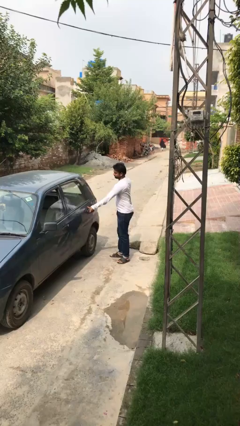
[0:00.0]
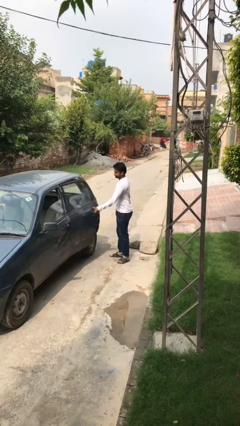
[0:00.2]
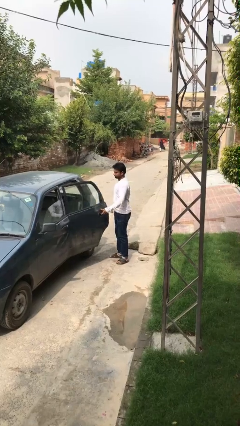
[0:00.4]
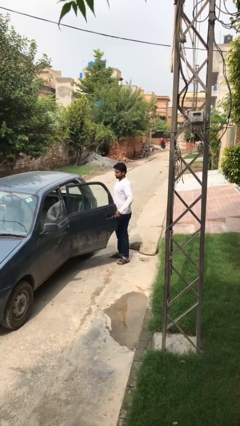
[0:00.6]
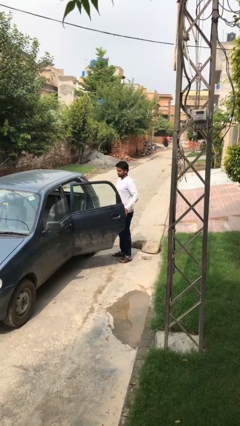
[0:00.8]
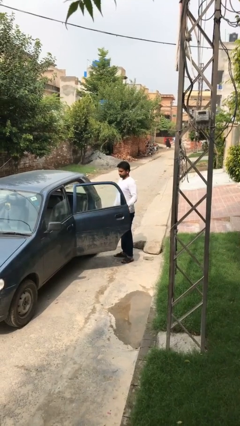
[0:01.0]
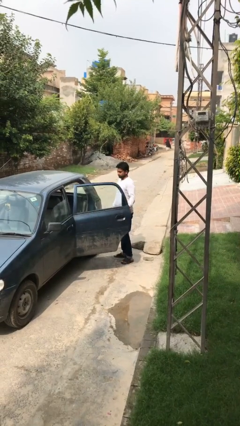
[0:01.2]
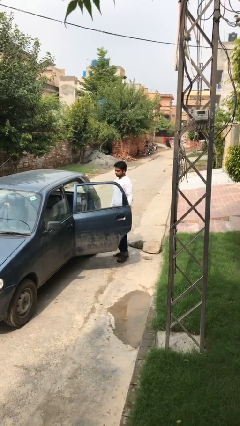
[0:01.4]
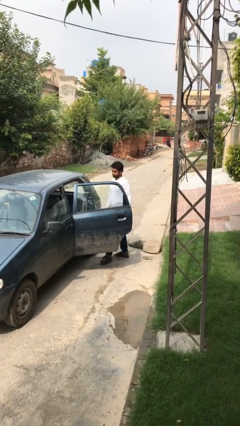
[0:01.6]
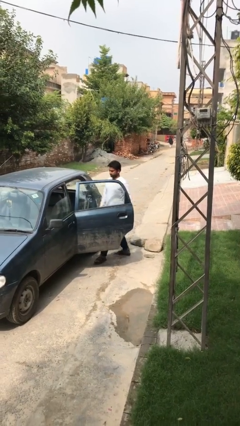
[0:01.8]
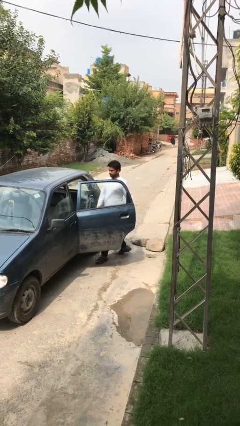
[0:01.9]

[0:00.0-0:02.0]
person opens car door

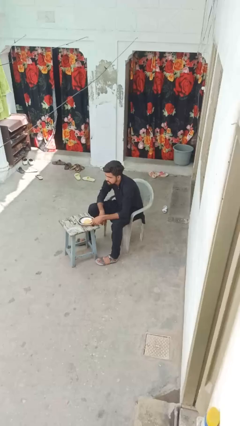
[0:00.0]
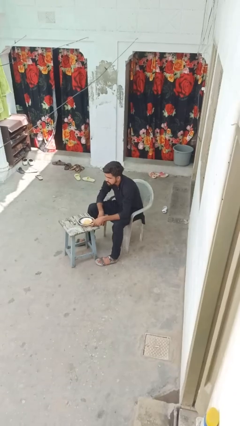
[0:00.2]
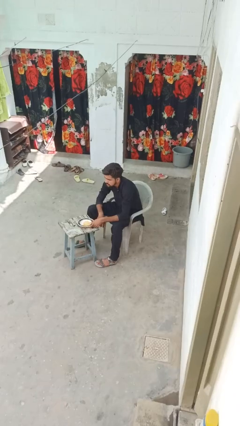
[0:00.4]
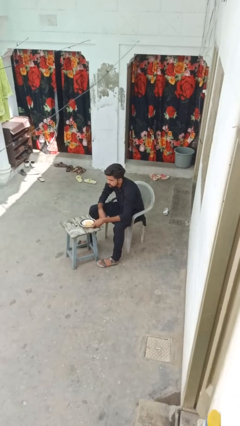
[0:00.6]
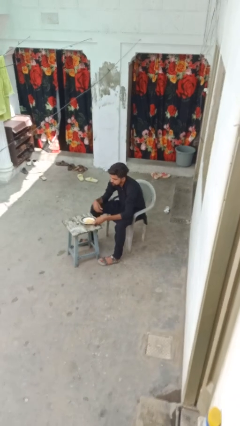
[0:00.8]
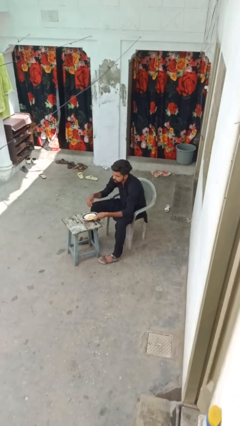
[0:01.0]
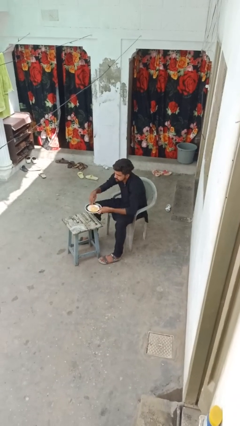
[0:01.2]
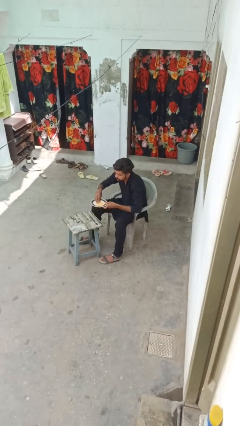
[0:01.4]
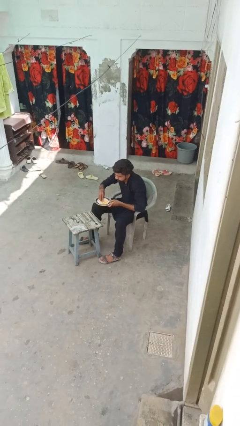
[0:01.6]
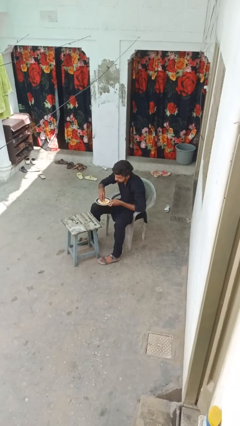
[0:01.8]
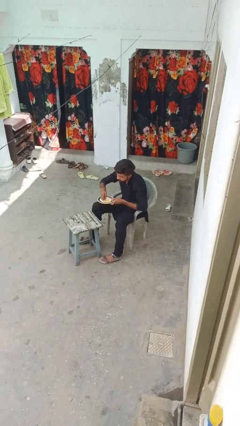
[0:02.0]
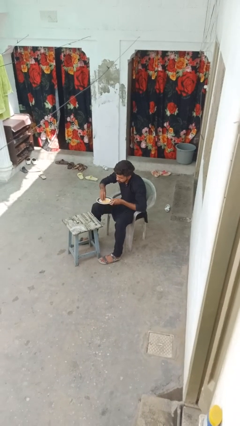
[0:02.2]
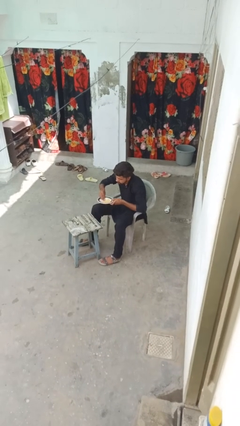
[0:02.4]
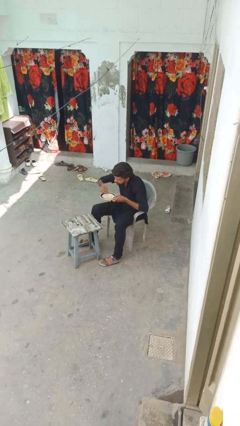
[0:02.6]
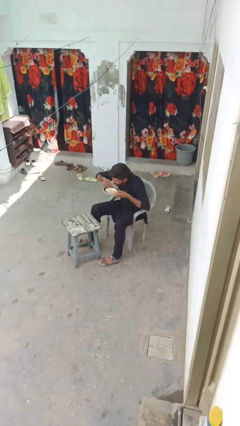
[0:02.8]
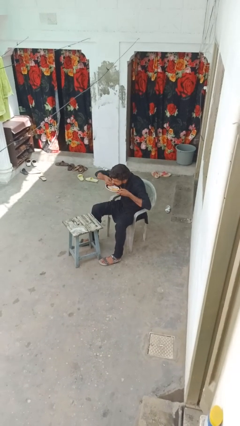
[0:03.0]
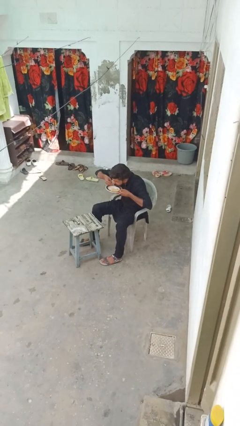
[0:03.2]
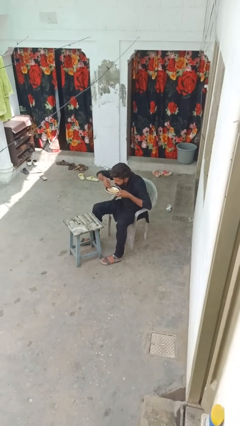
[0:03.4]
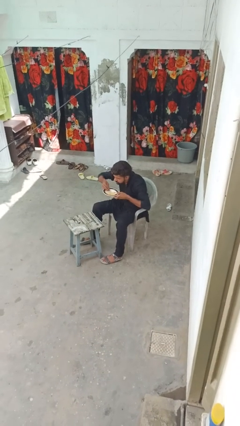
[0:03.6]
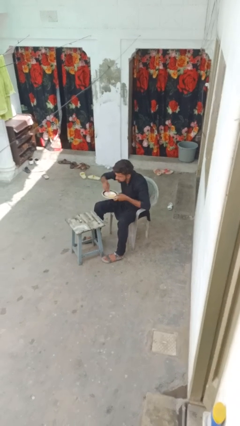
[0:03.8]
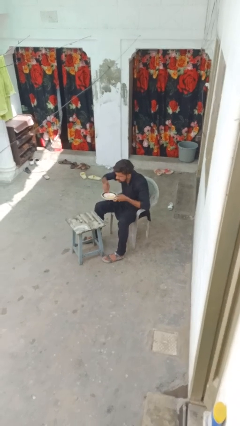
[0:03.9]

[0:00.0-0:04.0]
person eats with hands

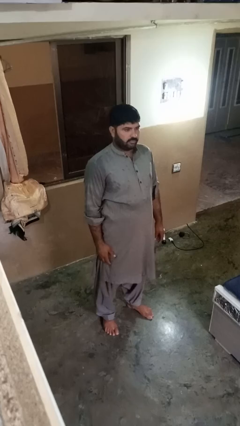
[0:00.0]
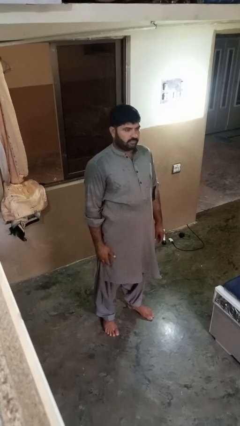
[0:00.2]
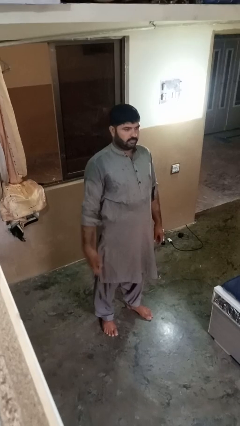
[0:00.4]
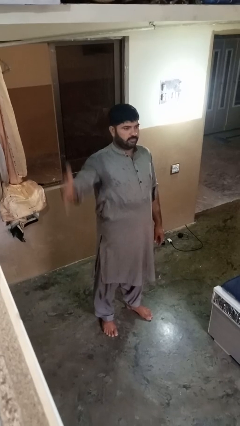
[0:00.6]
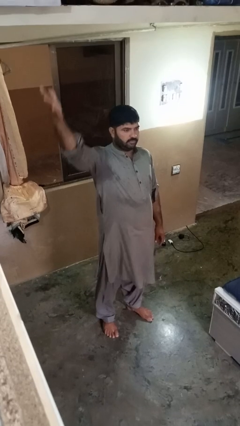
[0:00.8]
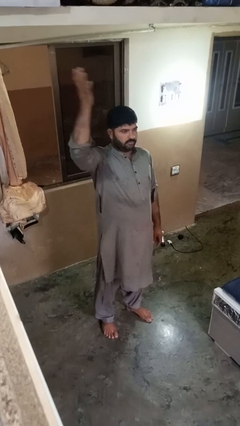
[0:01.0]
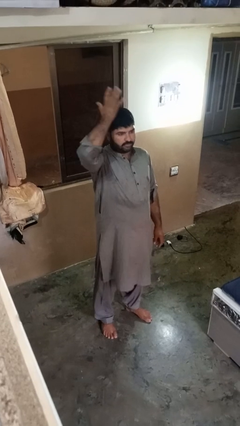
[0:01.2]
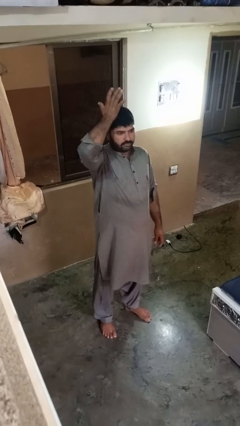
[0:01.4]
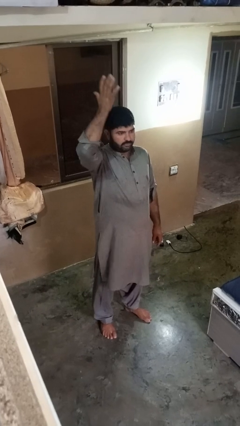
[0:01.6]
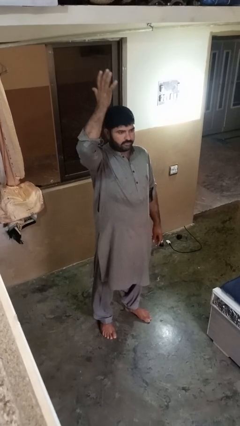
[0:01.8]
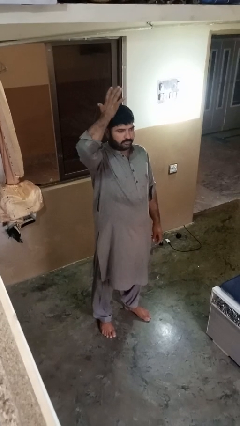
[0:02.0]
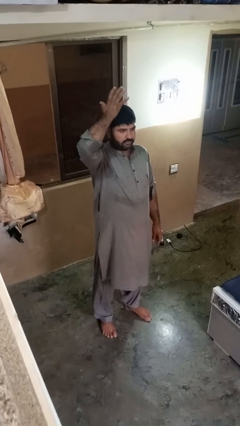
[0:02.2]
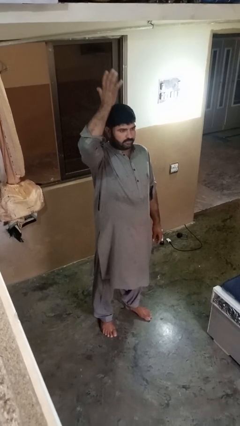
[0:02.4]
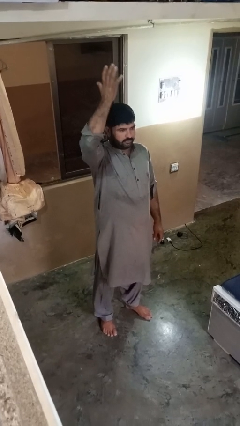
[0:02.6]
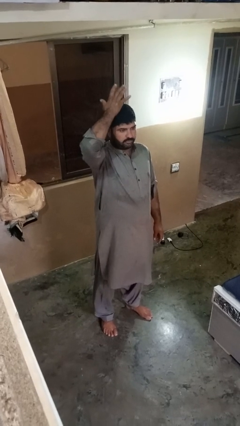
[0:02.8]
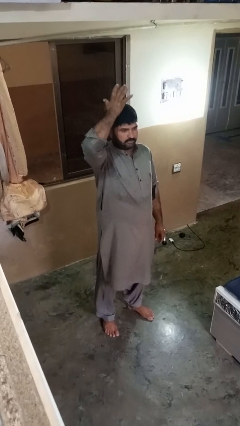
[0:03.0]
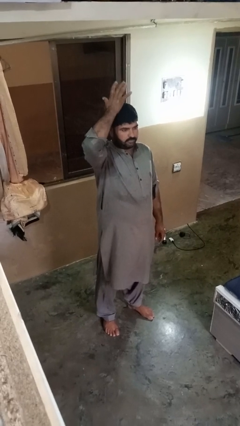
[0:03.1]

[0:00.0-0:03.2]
person pats head

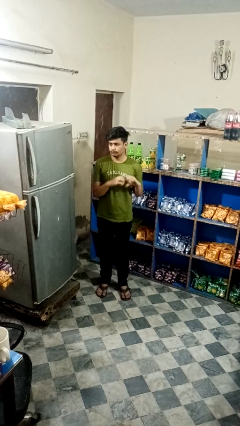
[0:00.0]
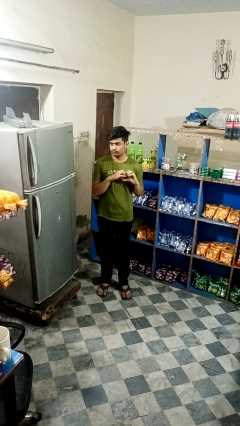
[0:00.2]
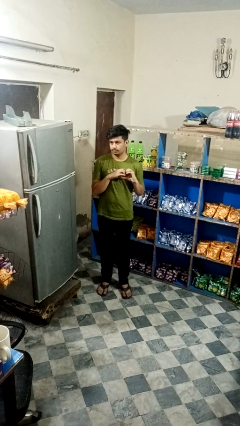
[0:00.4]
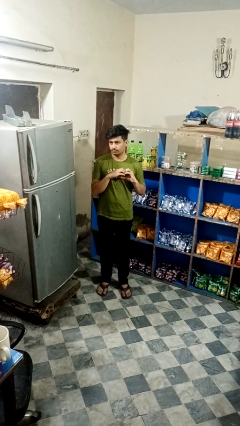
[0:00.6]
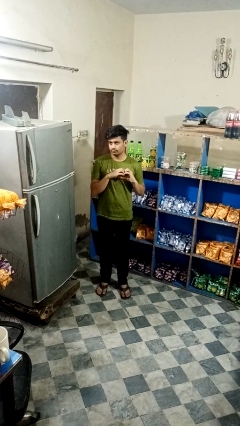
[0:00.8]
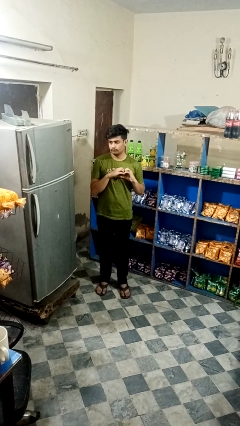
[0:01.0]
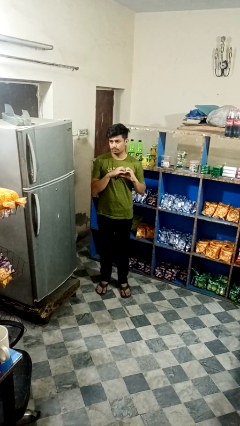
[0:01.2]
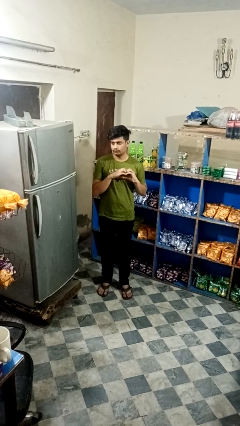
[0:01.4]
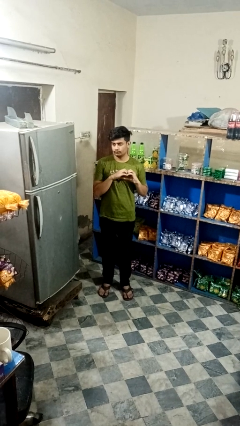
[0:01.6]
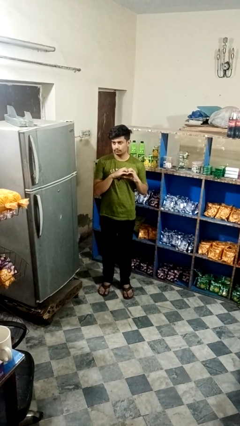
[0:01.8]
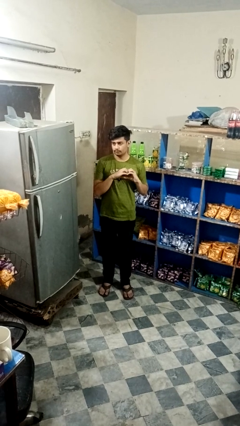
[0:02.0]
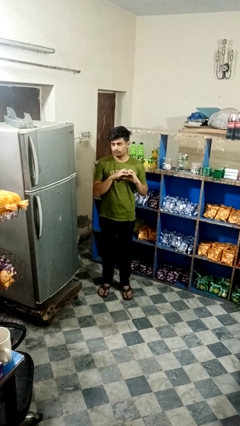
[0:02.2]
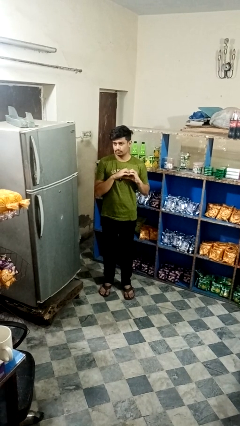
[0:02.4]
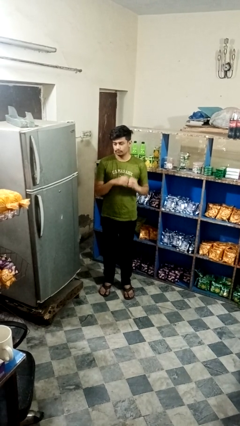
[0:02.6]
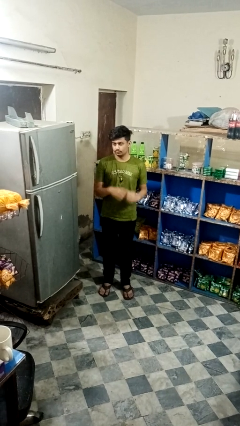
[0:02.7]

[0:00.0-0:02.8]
person gestures heart

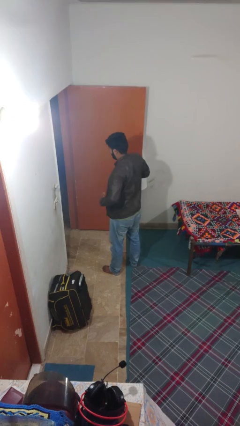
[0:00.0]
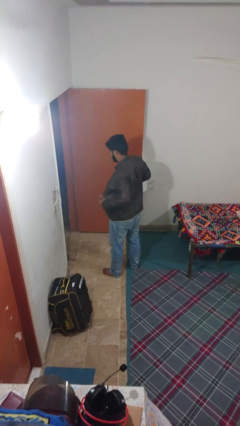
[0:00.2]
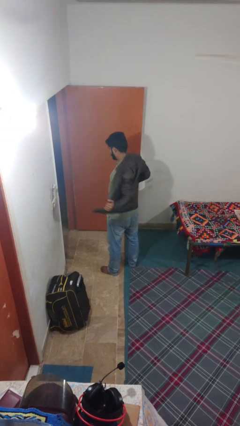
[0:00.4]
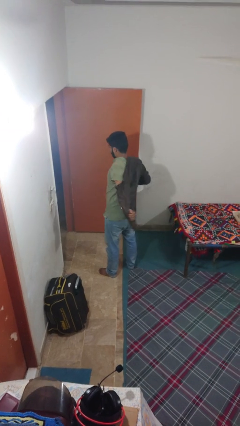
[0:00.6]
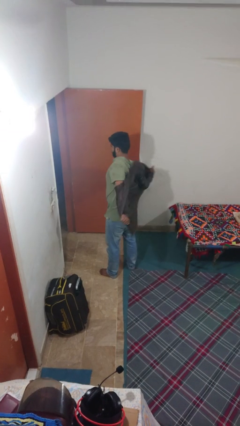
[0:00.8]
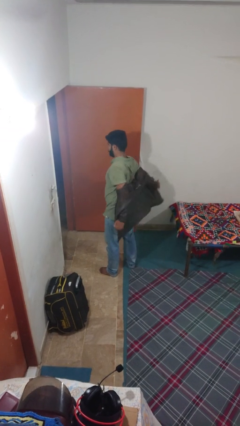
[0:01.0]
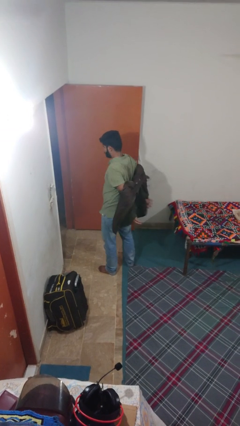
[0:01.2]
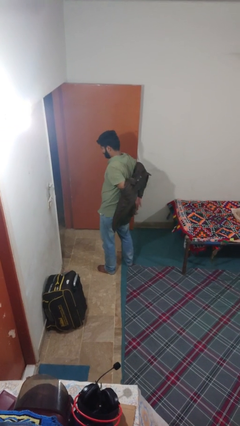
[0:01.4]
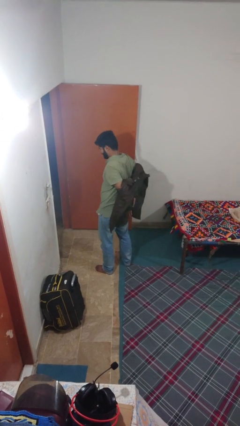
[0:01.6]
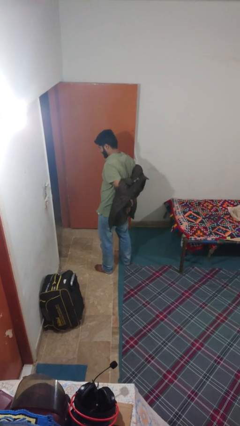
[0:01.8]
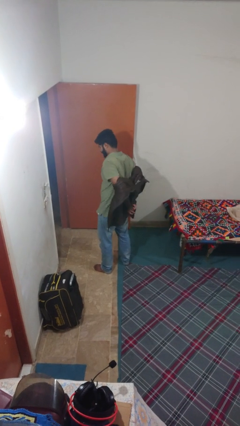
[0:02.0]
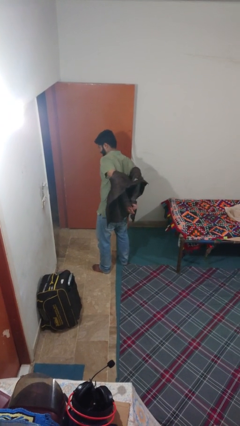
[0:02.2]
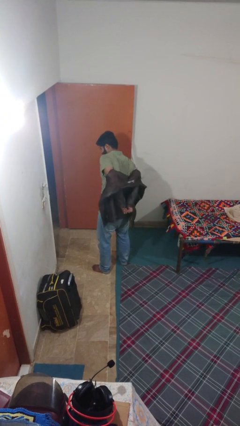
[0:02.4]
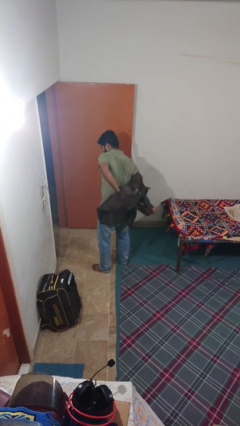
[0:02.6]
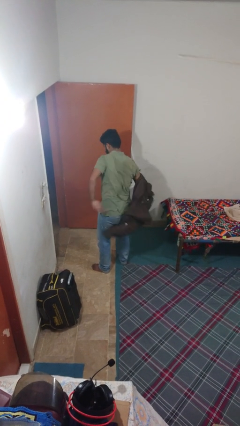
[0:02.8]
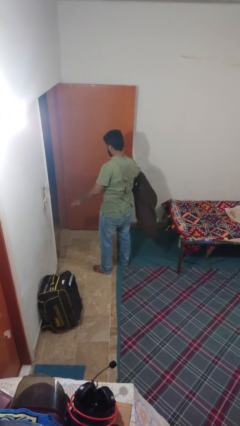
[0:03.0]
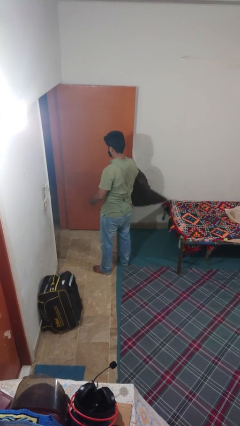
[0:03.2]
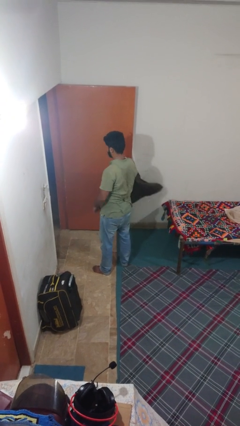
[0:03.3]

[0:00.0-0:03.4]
person takes off jacket

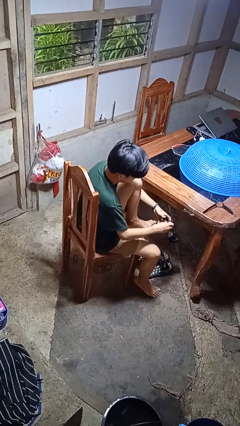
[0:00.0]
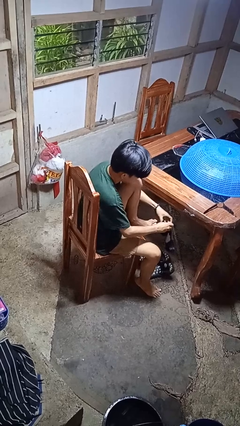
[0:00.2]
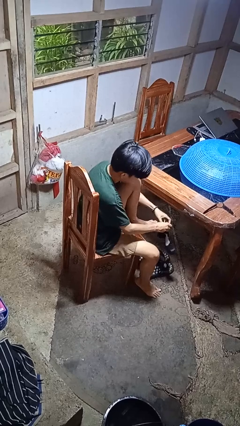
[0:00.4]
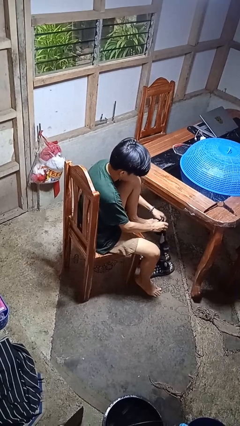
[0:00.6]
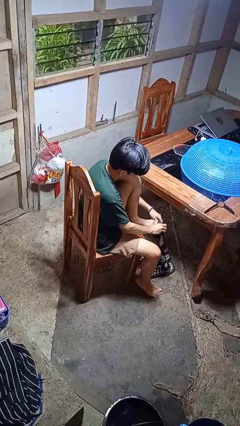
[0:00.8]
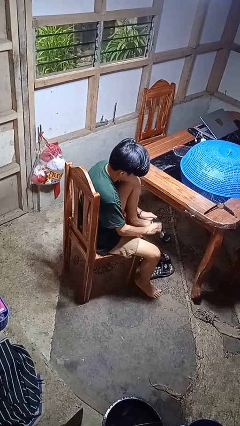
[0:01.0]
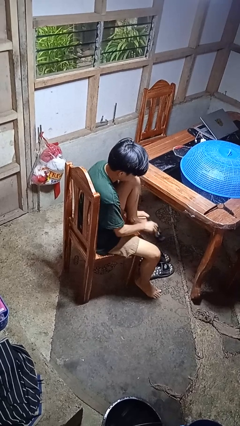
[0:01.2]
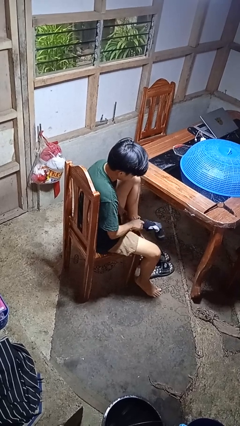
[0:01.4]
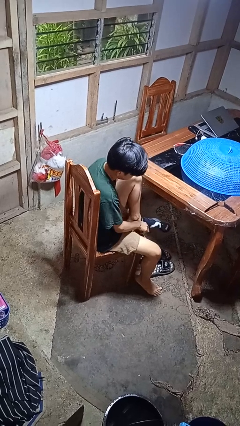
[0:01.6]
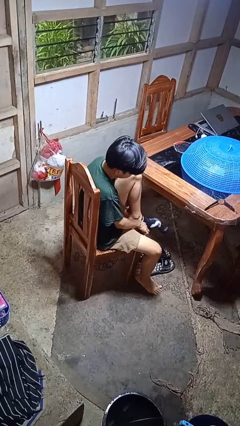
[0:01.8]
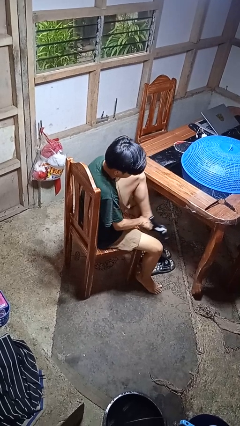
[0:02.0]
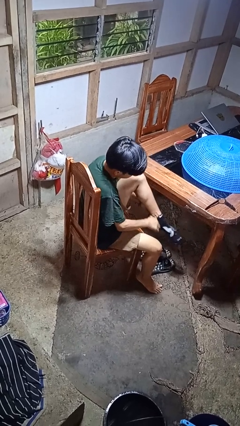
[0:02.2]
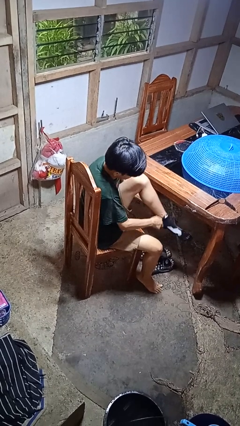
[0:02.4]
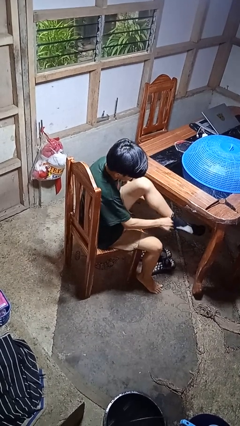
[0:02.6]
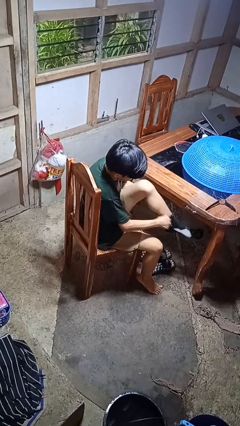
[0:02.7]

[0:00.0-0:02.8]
person puts on socks
